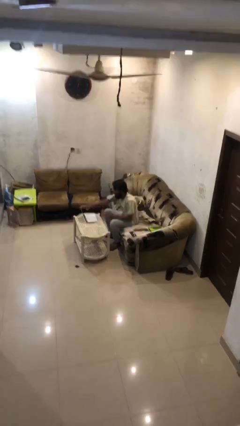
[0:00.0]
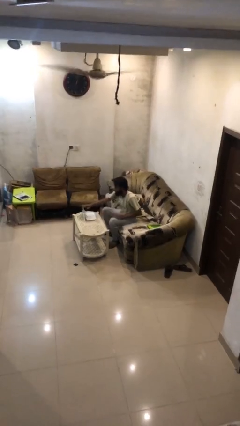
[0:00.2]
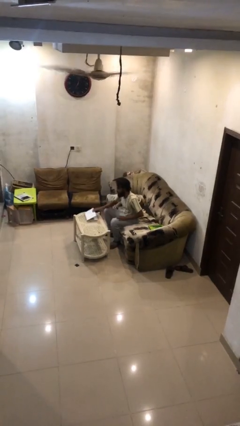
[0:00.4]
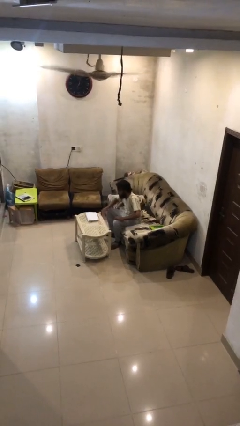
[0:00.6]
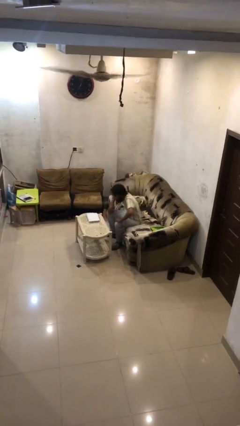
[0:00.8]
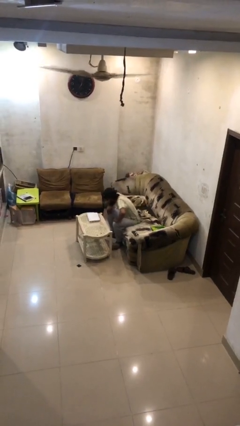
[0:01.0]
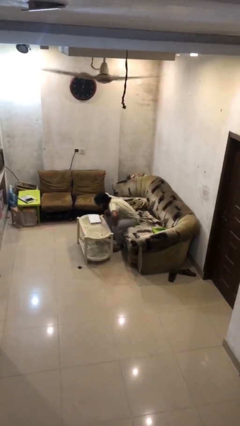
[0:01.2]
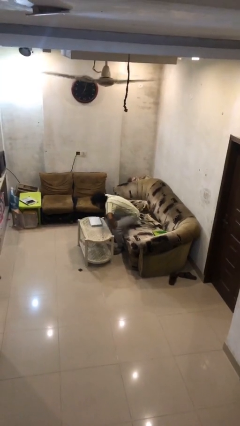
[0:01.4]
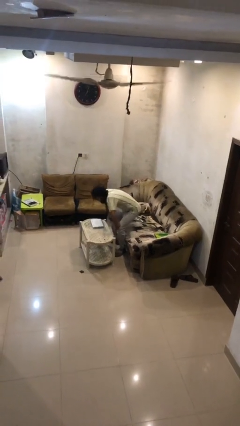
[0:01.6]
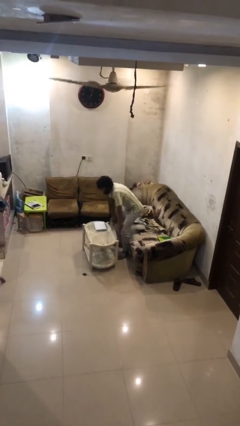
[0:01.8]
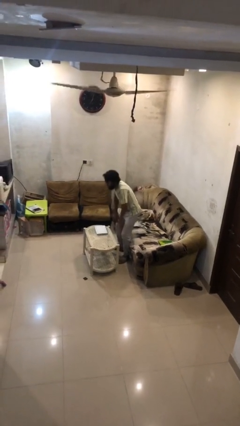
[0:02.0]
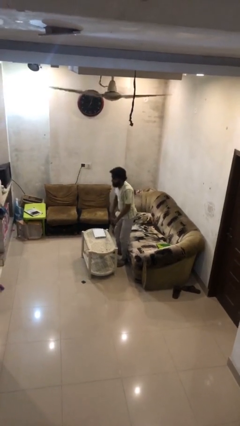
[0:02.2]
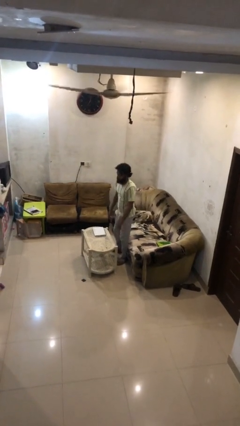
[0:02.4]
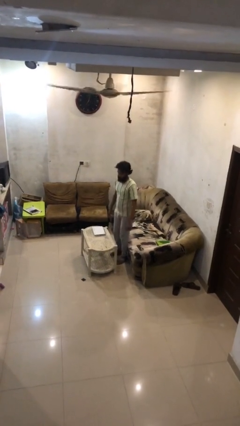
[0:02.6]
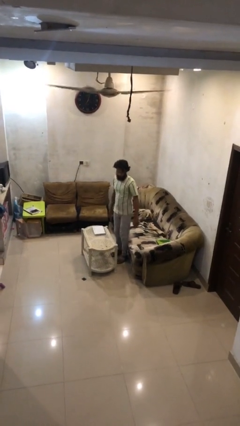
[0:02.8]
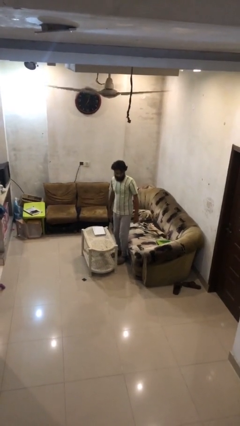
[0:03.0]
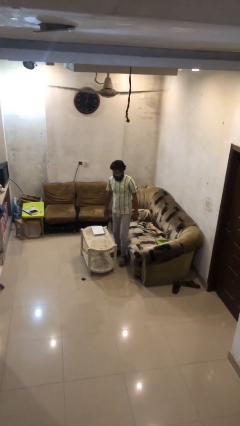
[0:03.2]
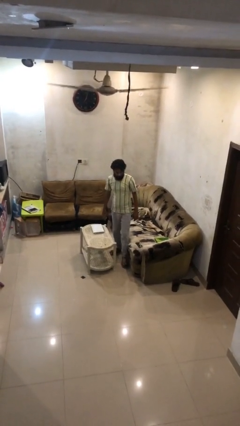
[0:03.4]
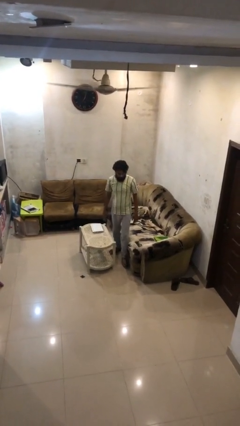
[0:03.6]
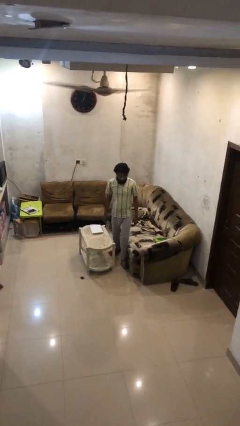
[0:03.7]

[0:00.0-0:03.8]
person stands up

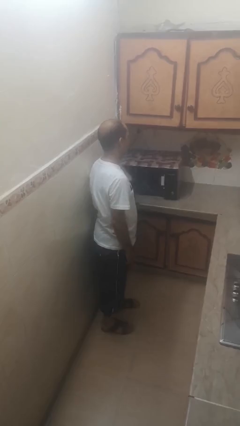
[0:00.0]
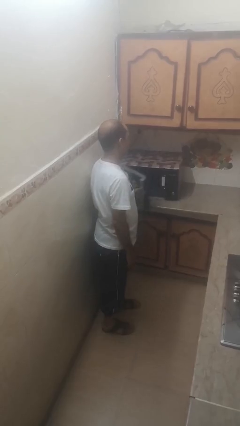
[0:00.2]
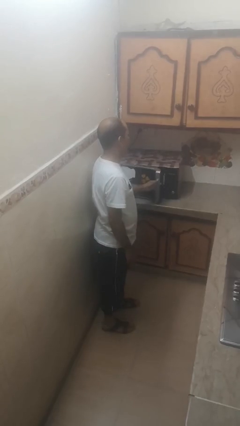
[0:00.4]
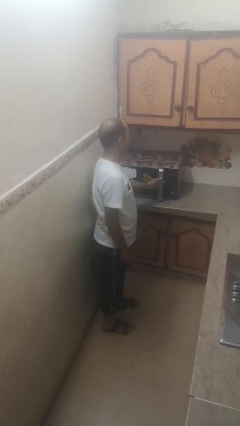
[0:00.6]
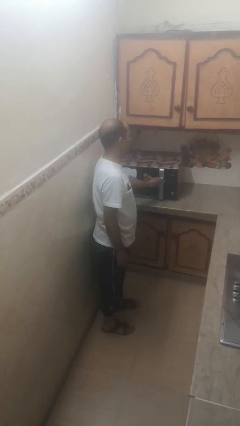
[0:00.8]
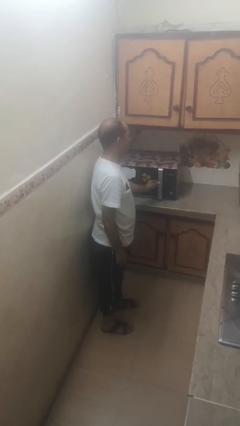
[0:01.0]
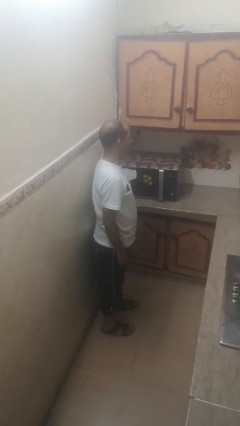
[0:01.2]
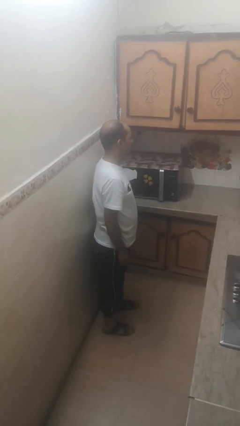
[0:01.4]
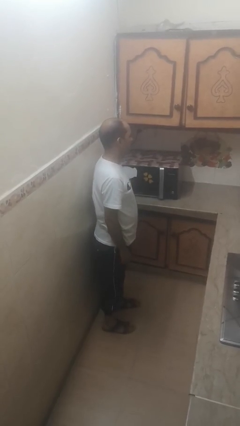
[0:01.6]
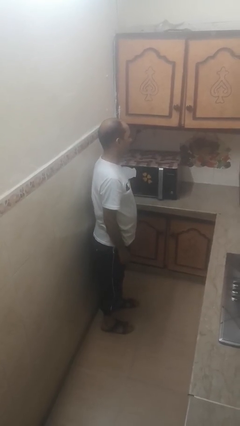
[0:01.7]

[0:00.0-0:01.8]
person closes microwave

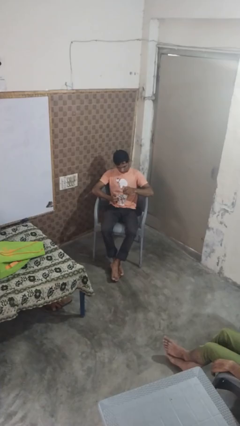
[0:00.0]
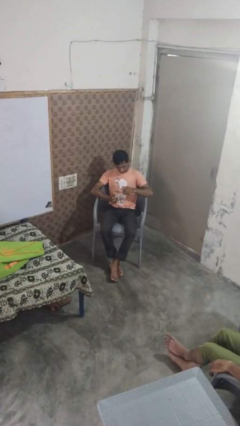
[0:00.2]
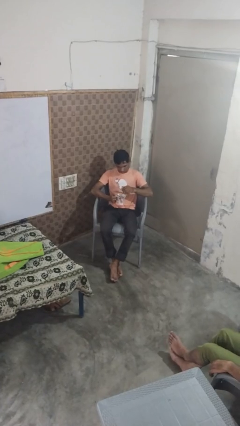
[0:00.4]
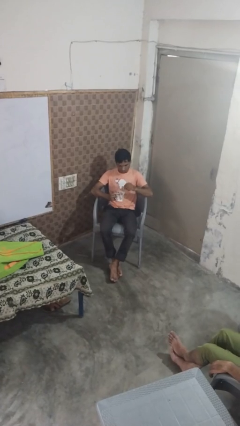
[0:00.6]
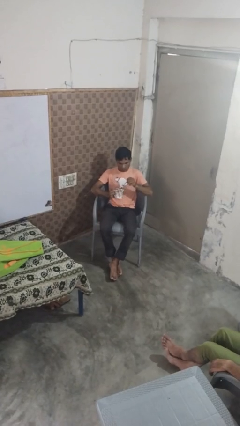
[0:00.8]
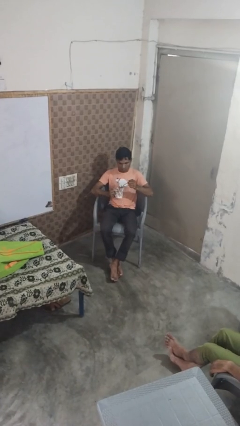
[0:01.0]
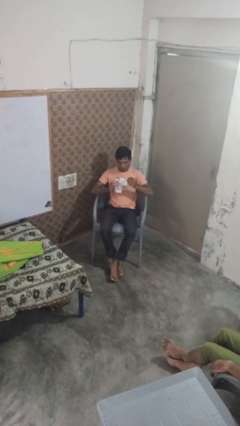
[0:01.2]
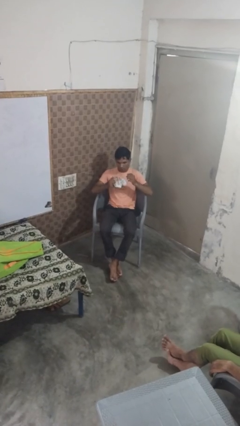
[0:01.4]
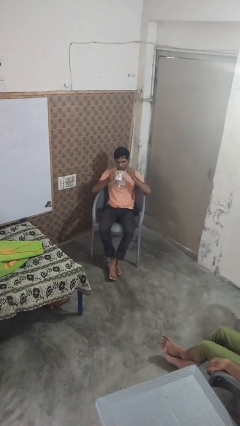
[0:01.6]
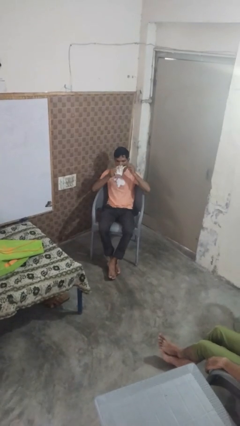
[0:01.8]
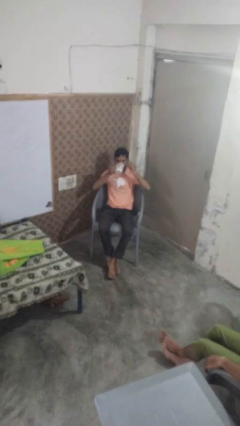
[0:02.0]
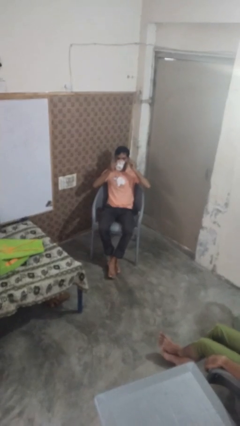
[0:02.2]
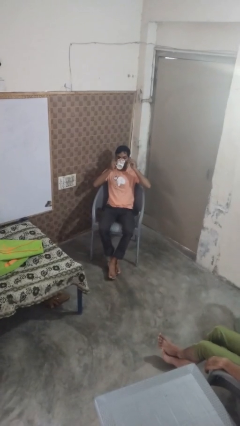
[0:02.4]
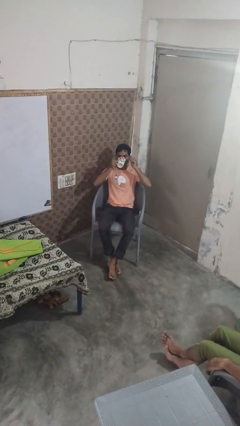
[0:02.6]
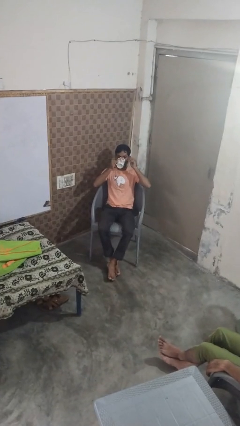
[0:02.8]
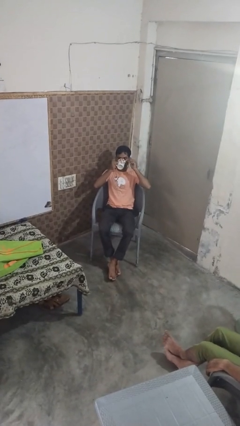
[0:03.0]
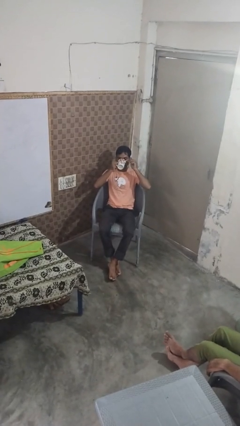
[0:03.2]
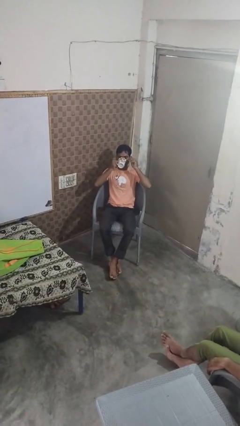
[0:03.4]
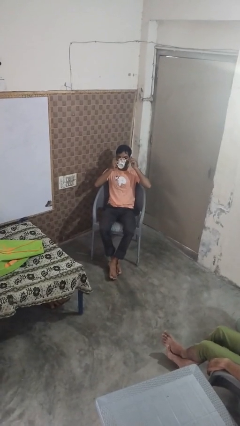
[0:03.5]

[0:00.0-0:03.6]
person drinks from mug

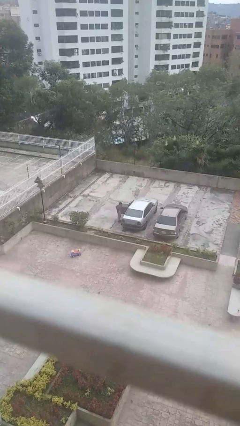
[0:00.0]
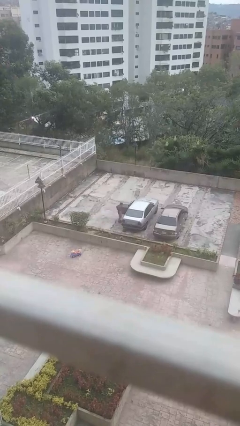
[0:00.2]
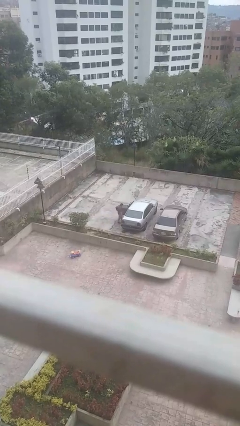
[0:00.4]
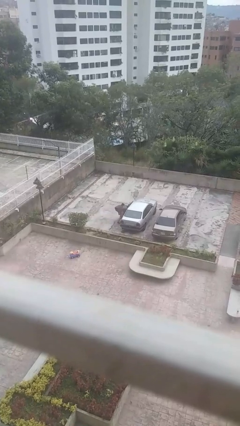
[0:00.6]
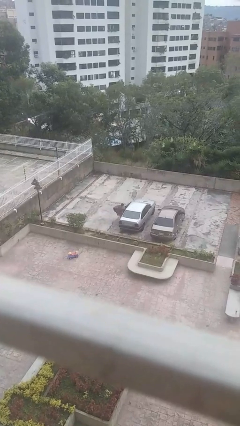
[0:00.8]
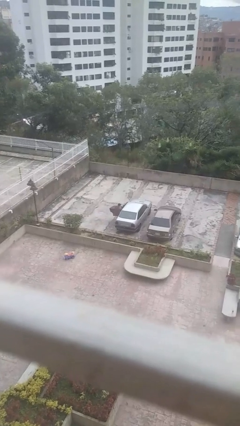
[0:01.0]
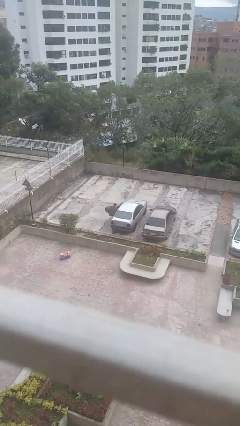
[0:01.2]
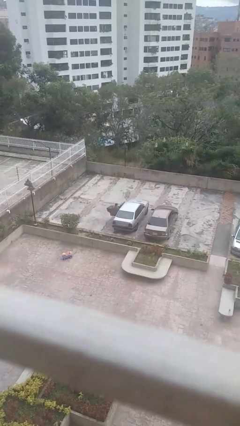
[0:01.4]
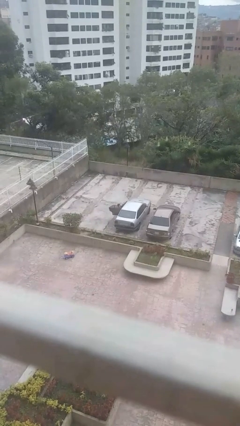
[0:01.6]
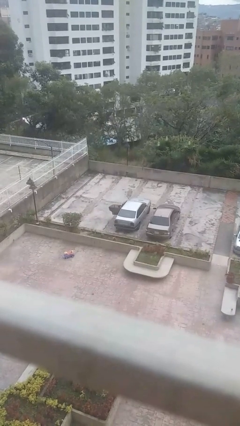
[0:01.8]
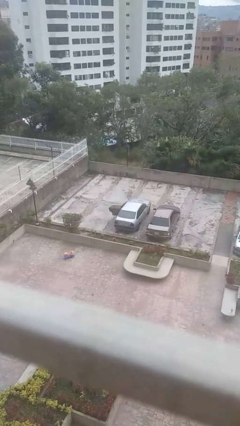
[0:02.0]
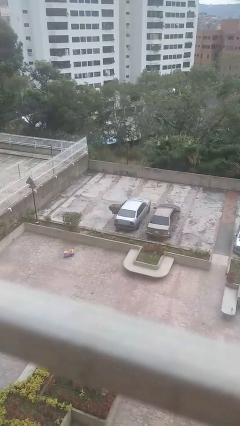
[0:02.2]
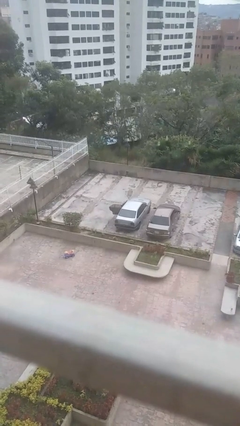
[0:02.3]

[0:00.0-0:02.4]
person enters car

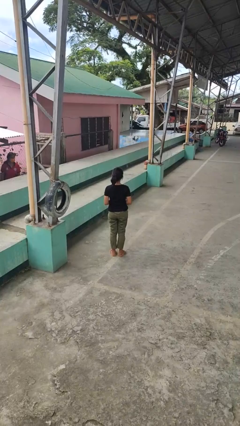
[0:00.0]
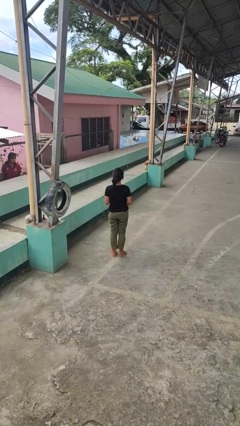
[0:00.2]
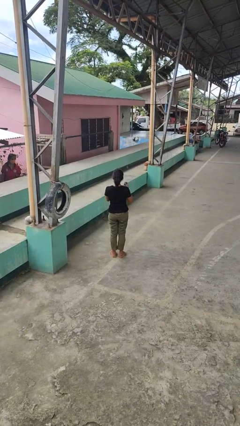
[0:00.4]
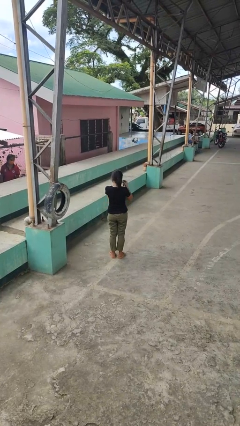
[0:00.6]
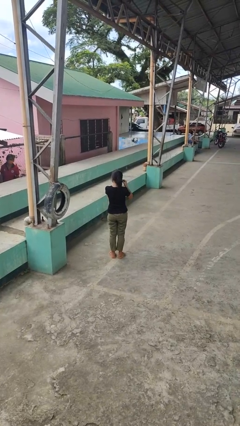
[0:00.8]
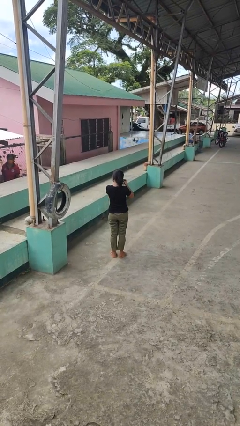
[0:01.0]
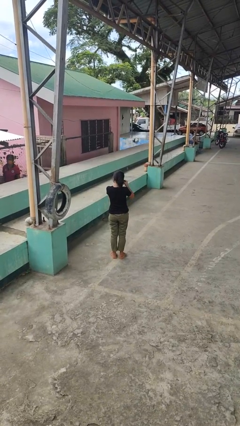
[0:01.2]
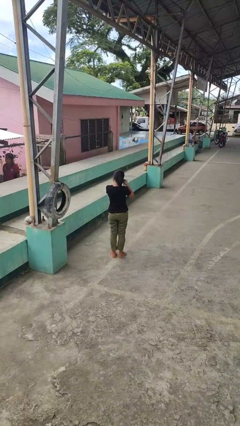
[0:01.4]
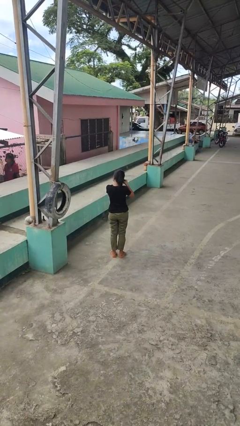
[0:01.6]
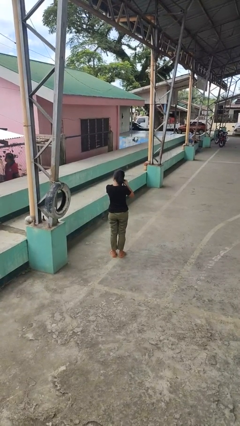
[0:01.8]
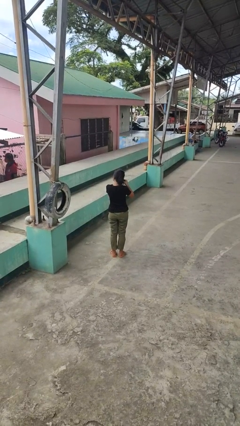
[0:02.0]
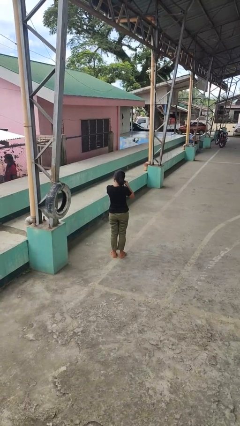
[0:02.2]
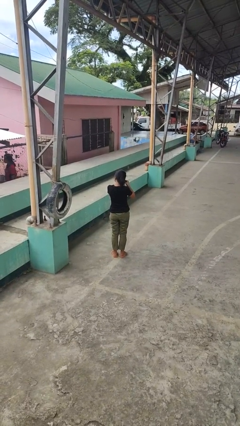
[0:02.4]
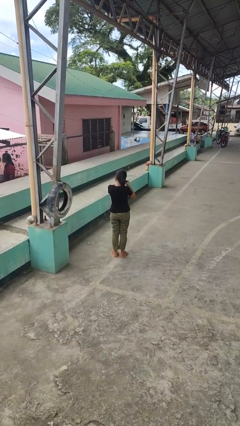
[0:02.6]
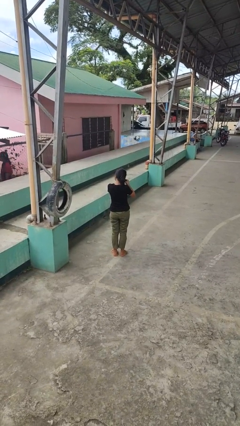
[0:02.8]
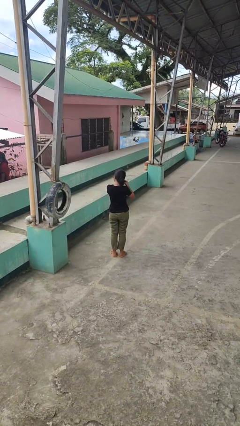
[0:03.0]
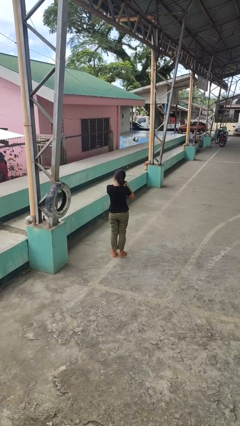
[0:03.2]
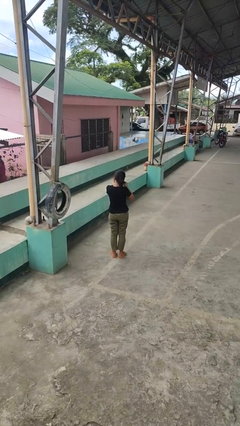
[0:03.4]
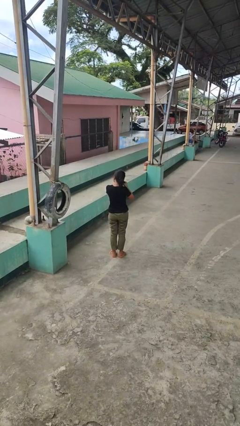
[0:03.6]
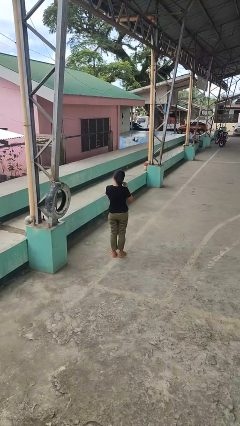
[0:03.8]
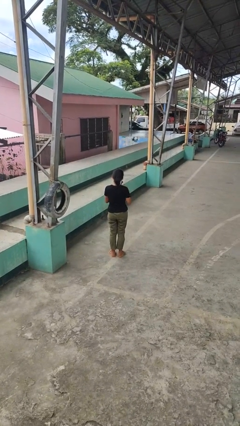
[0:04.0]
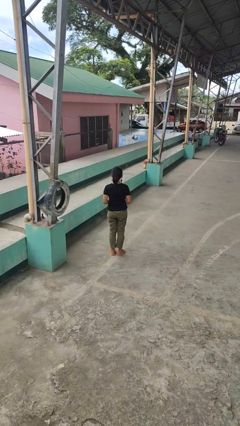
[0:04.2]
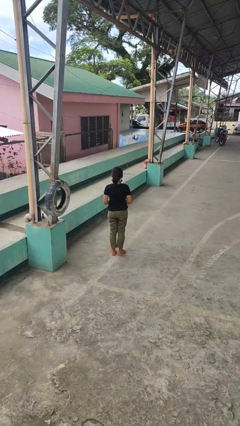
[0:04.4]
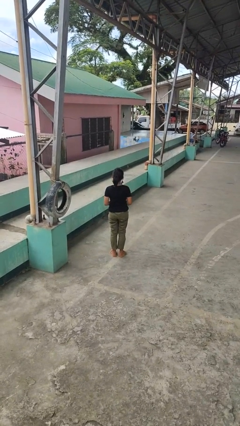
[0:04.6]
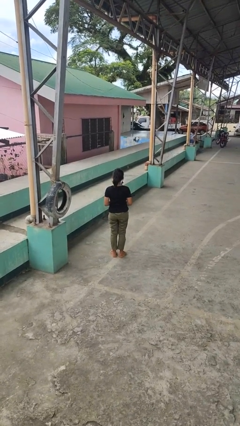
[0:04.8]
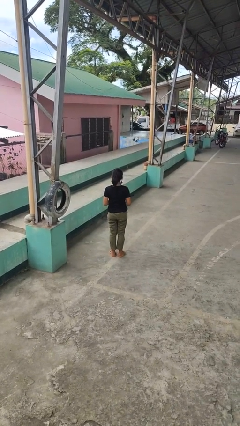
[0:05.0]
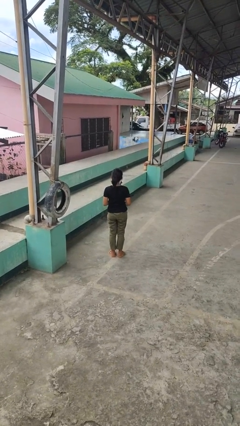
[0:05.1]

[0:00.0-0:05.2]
person puts on earrings

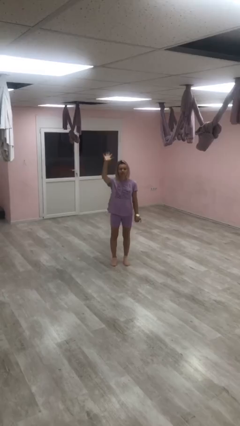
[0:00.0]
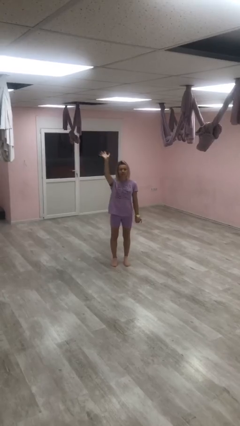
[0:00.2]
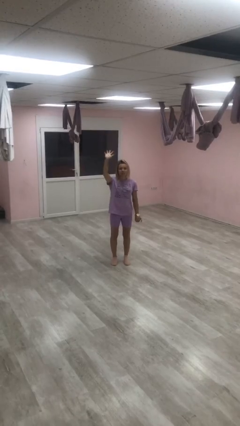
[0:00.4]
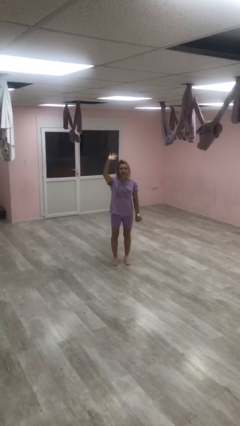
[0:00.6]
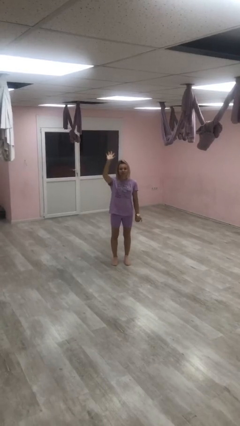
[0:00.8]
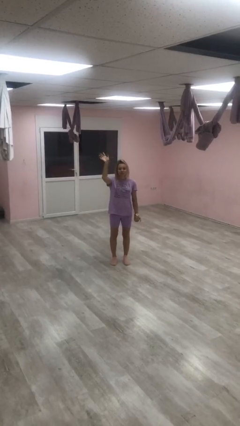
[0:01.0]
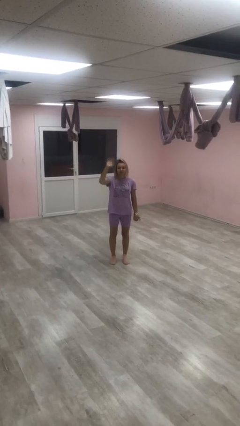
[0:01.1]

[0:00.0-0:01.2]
person waves at person

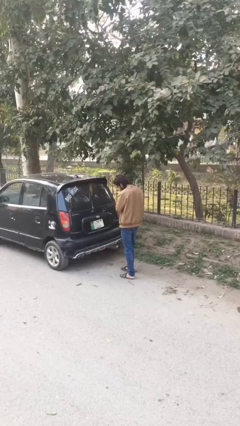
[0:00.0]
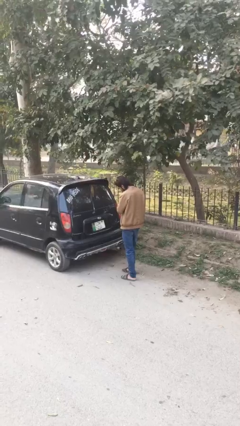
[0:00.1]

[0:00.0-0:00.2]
person opens car trunk
